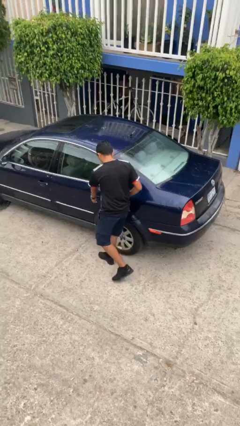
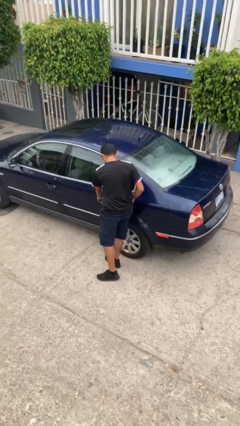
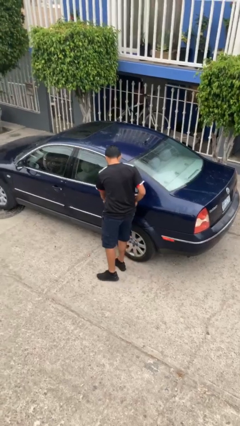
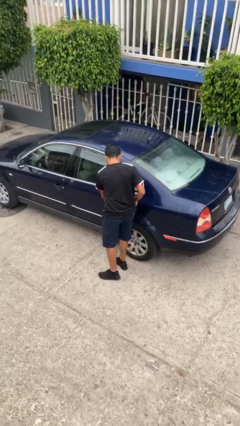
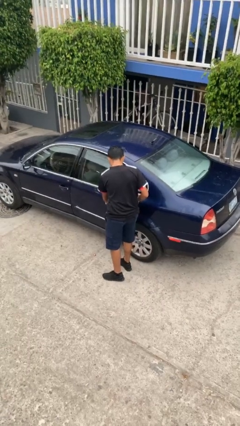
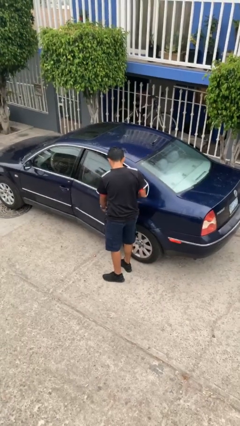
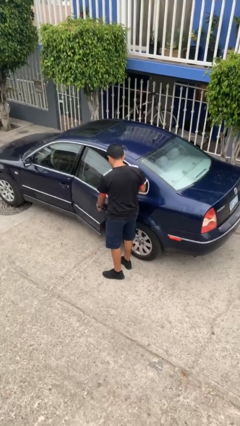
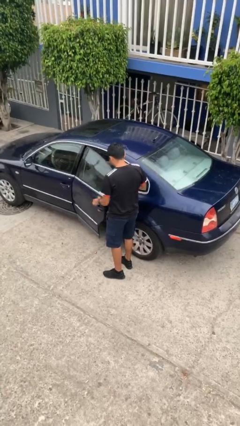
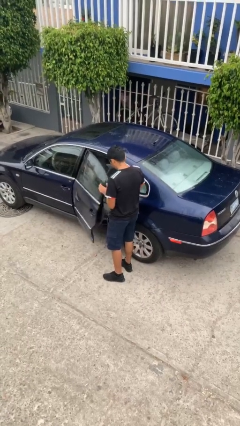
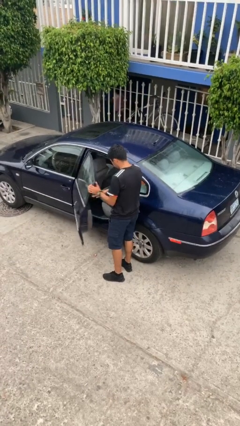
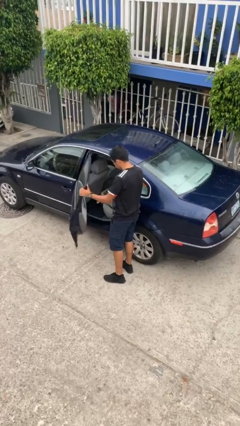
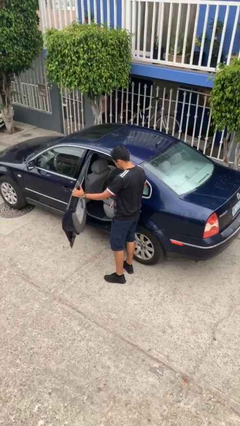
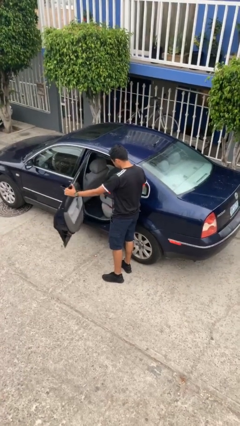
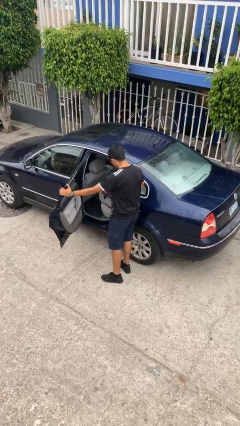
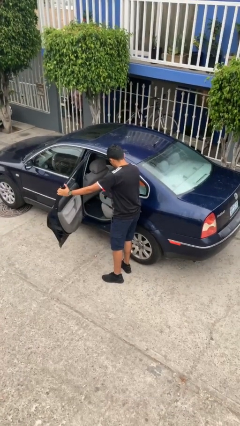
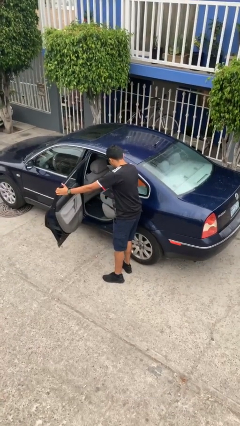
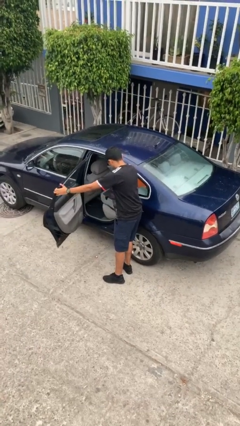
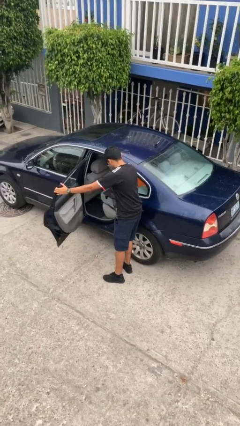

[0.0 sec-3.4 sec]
person opens car door

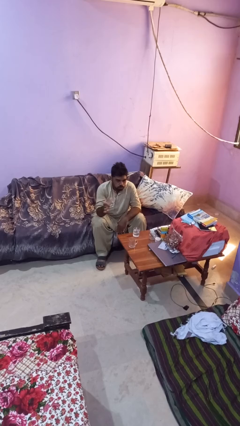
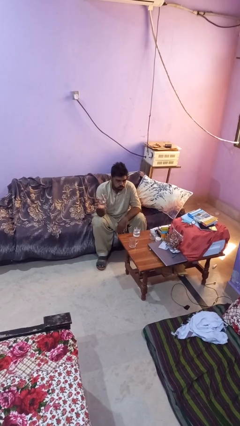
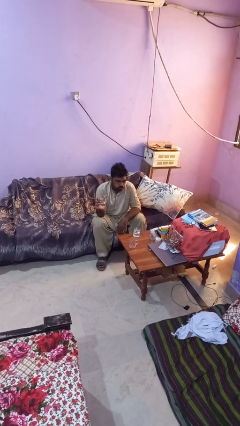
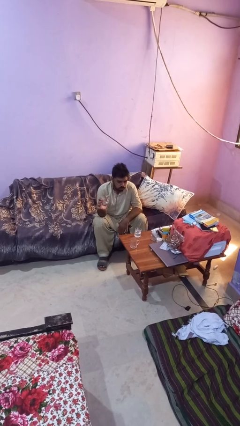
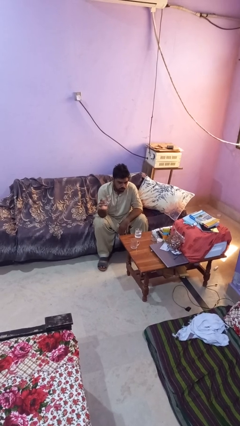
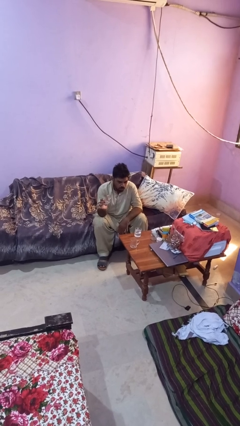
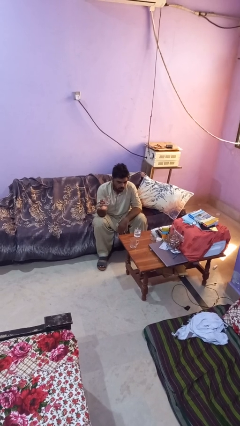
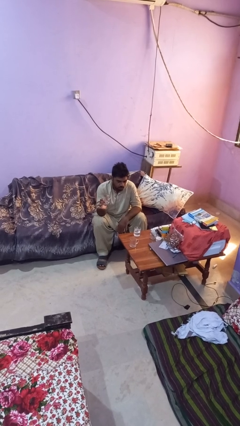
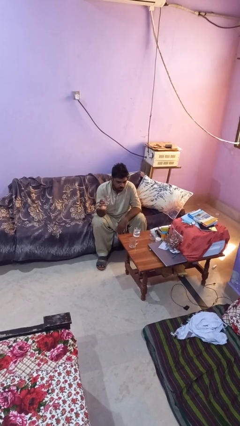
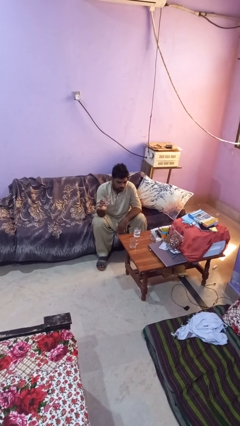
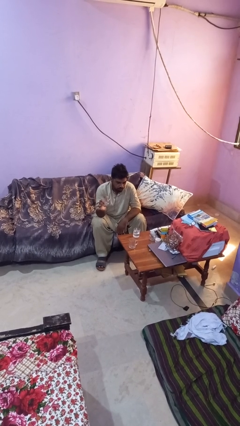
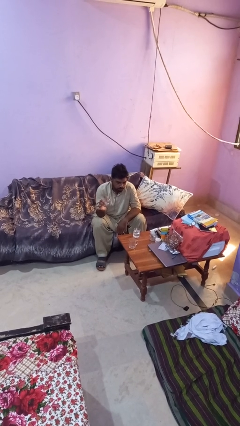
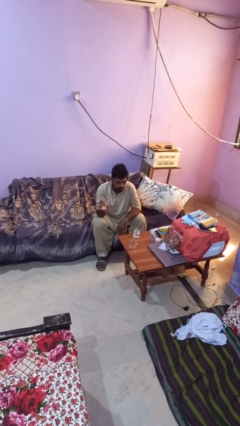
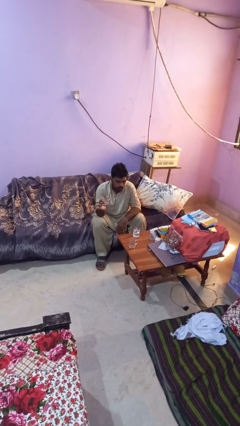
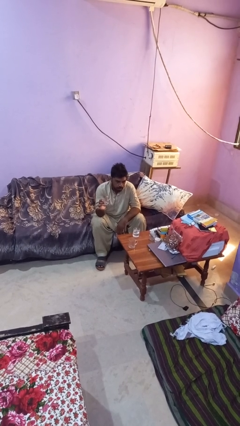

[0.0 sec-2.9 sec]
person puts down object on table

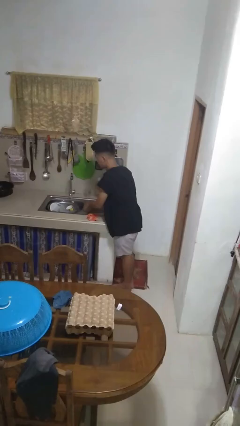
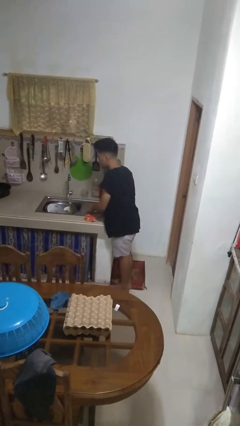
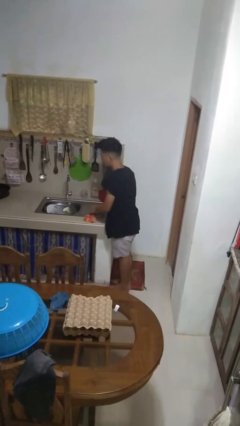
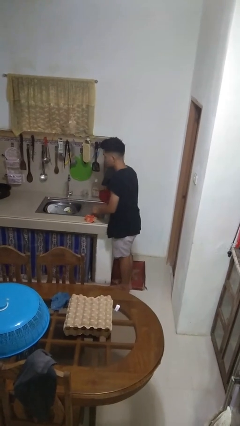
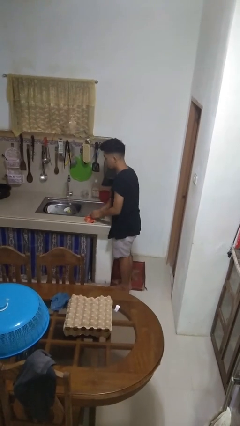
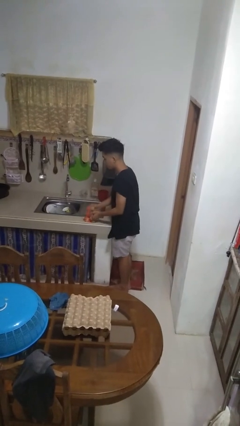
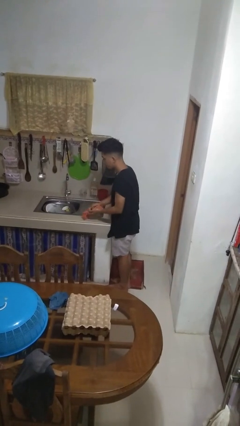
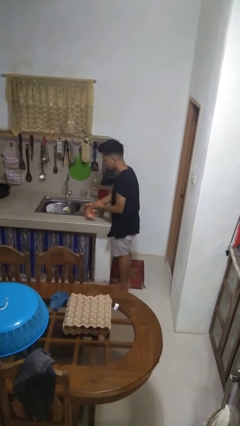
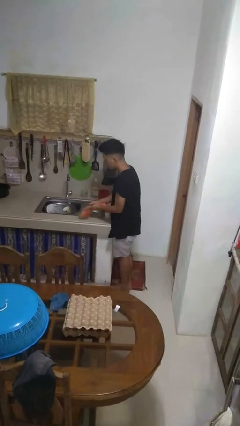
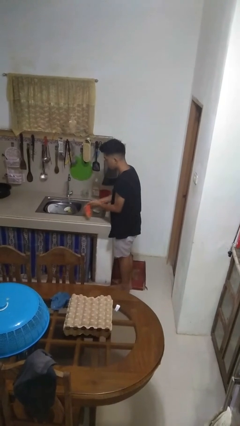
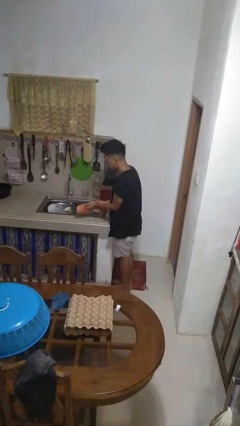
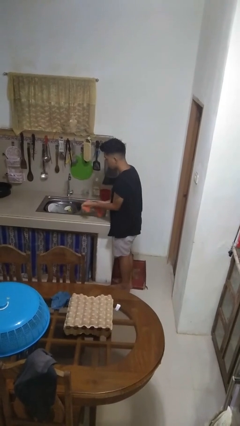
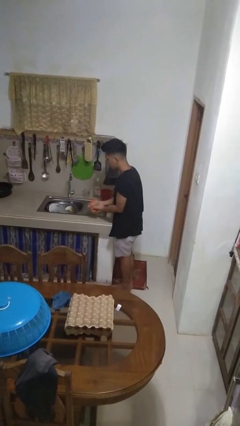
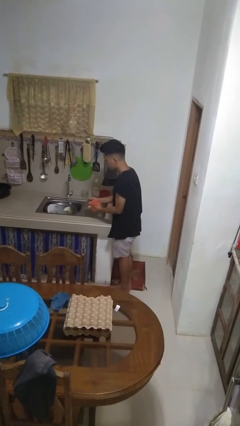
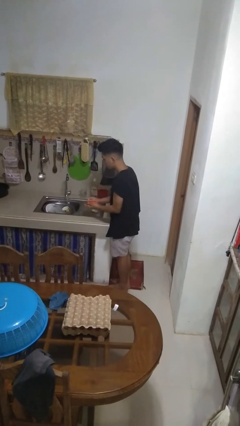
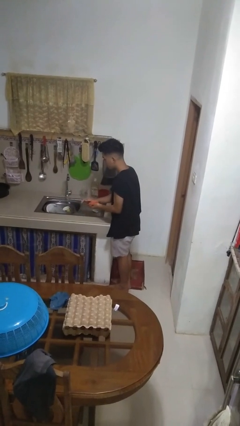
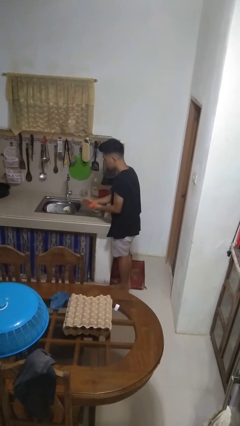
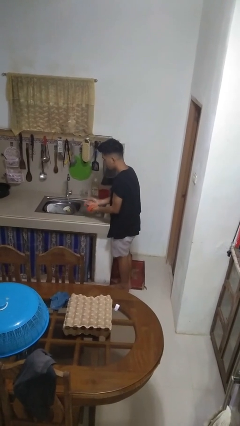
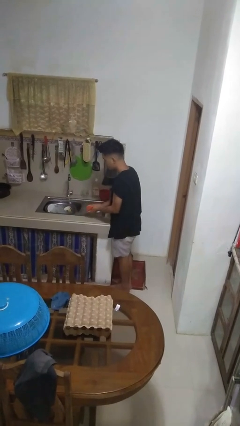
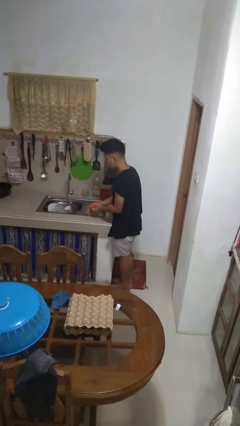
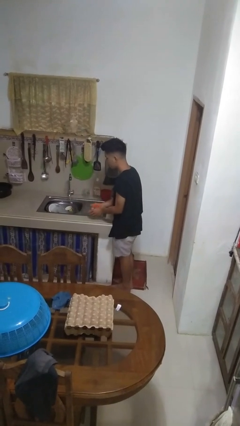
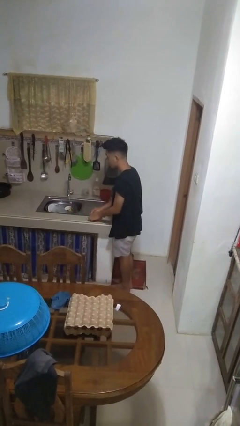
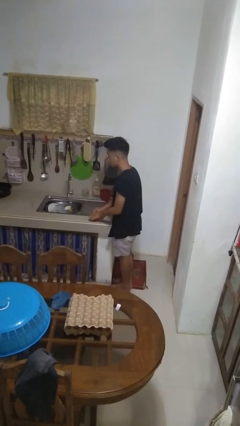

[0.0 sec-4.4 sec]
person dries hands with towel

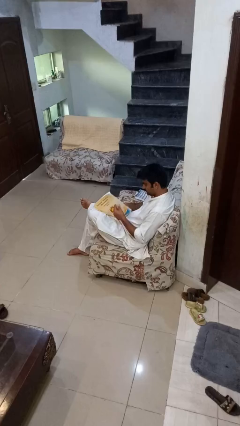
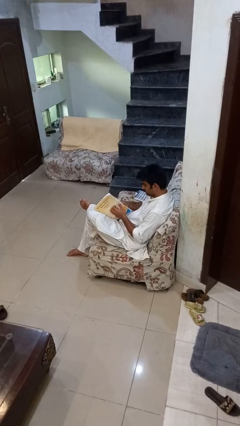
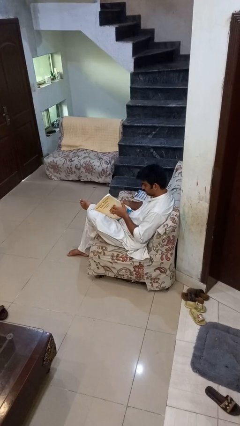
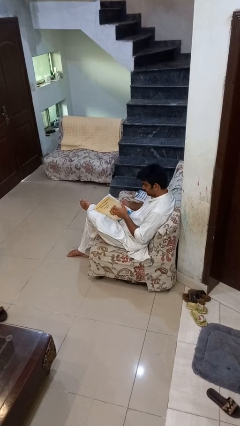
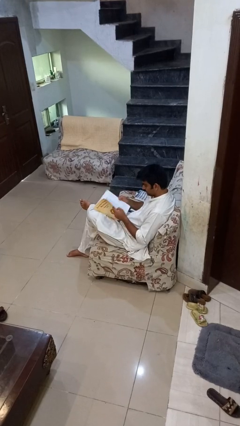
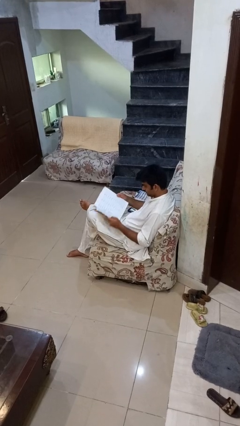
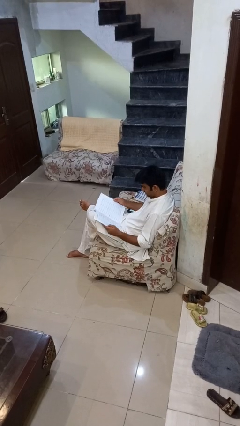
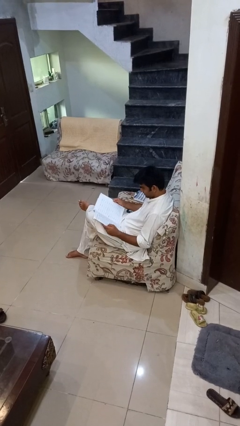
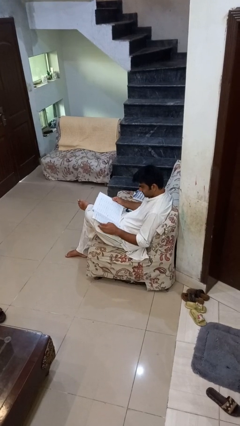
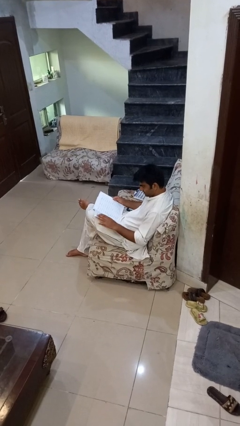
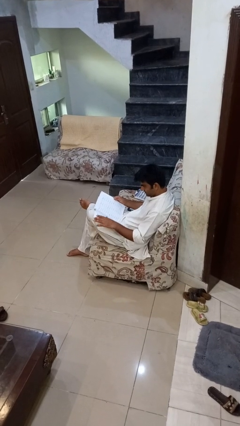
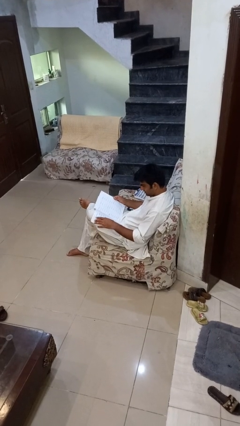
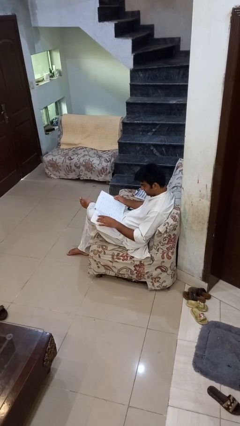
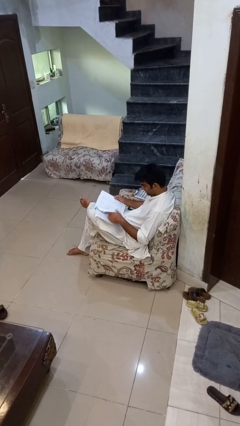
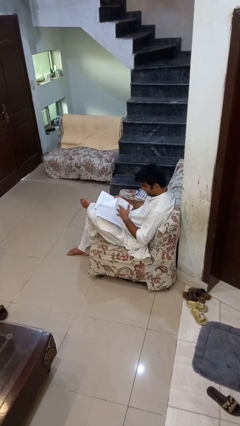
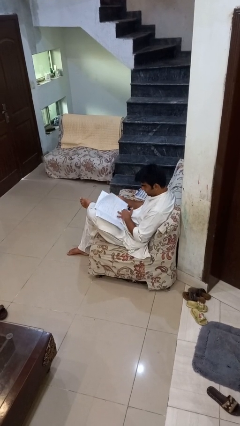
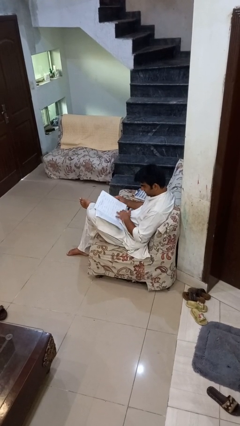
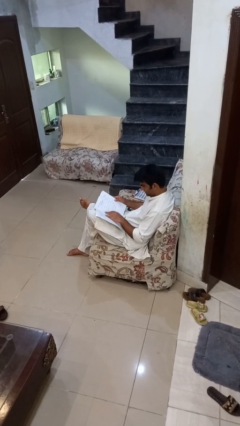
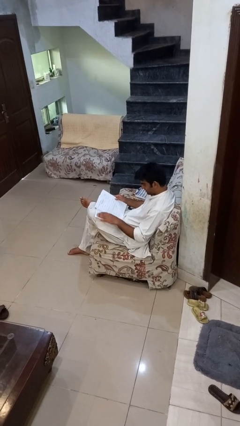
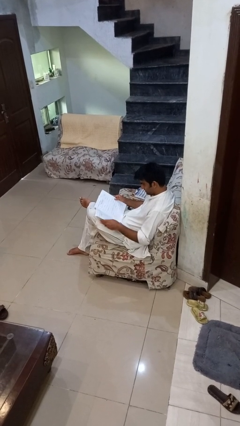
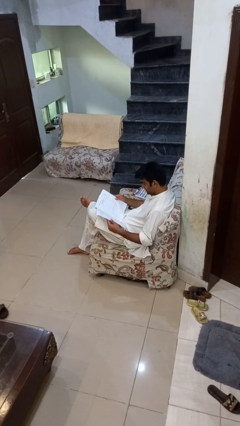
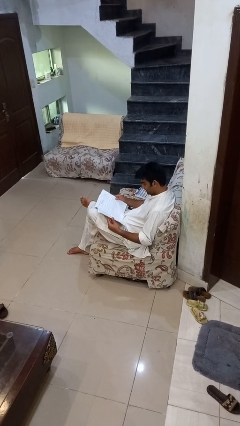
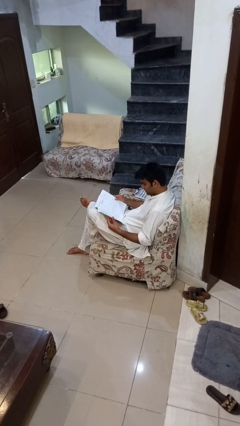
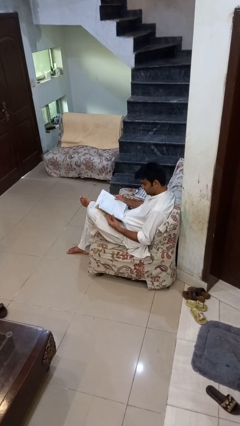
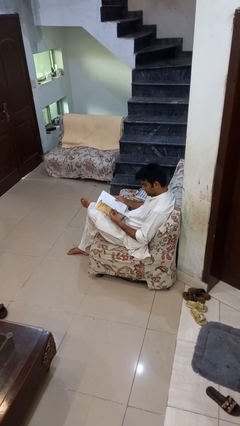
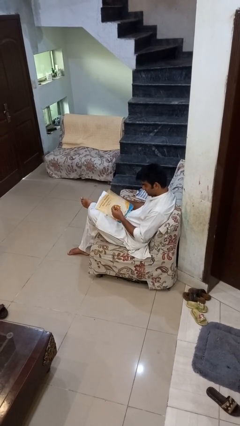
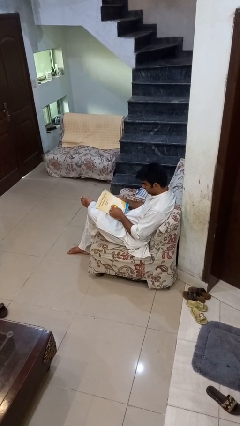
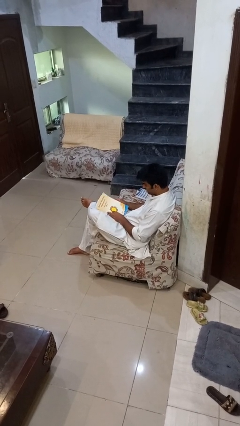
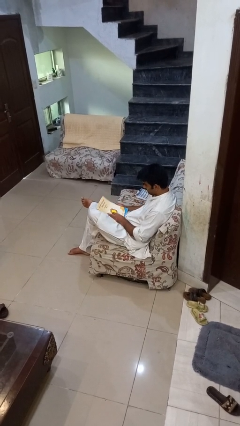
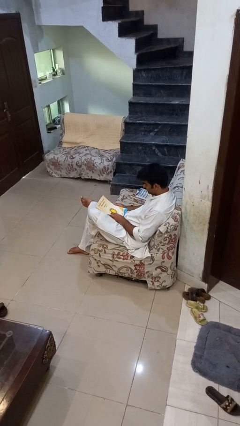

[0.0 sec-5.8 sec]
person reads book

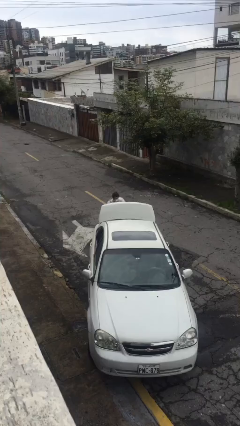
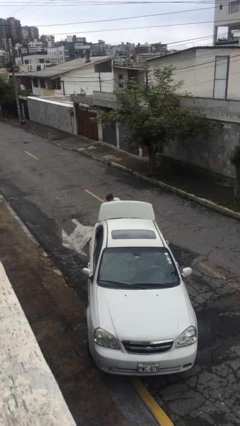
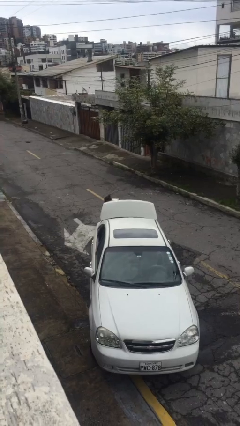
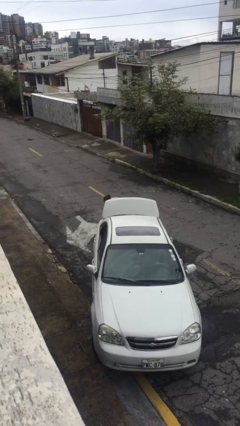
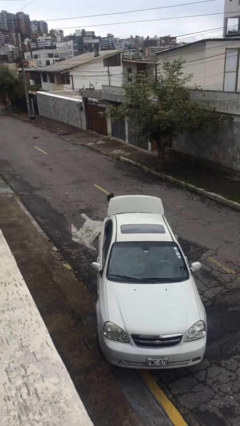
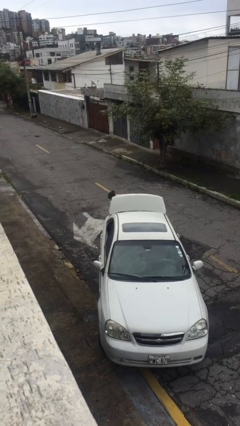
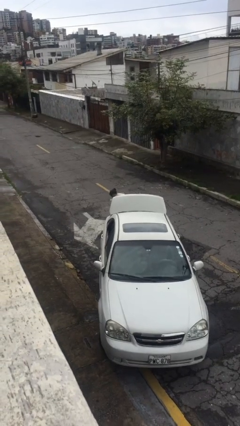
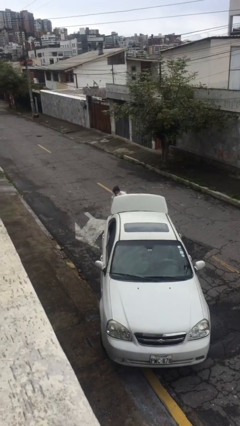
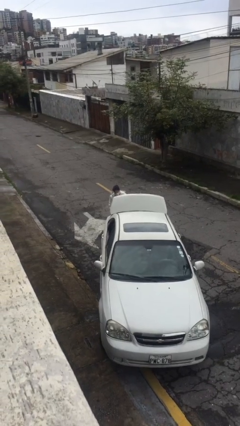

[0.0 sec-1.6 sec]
person loads car
